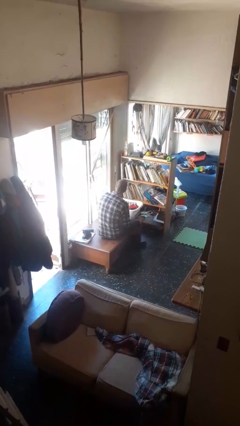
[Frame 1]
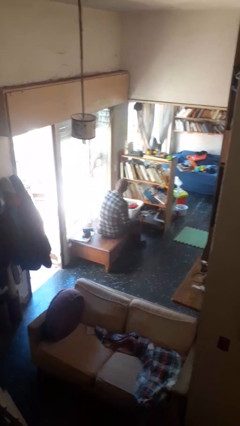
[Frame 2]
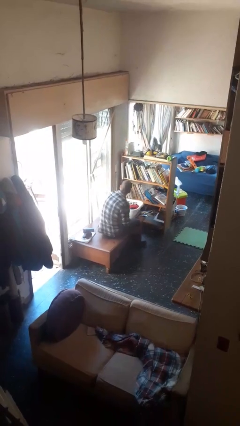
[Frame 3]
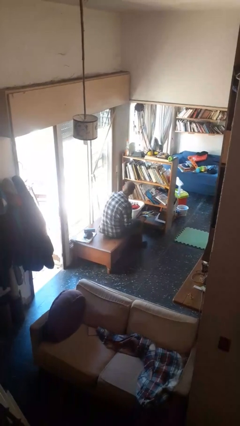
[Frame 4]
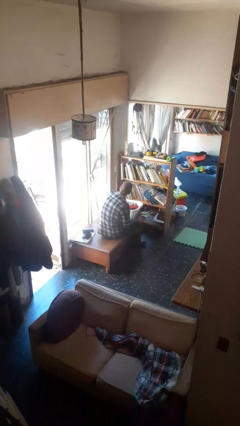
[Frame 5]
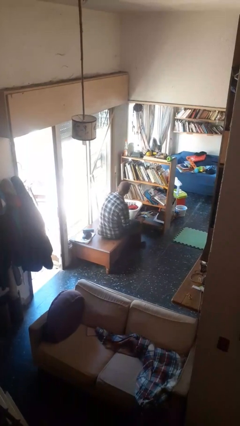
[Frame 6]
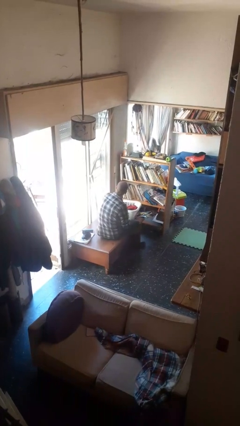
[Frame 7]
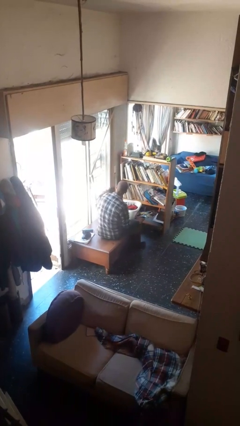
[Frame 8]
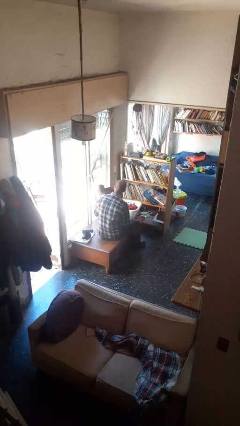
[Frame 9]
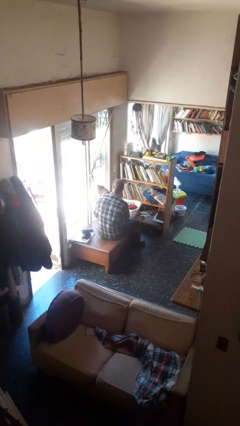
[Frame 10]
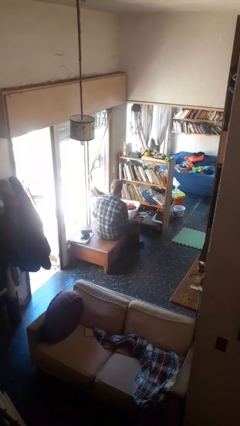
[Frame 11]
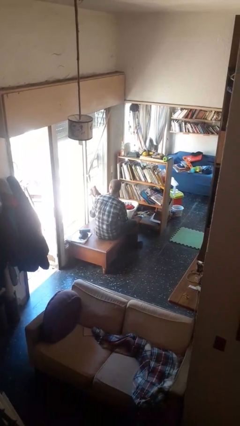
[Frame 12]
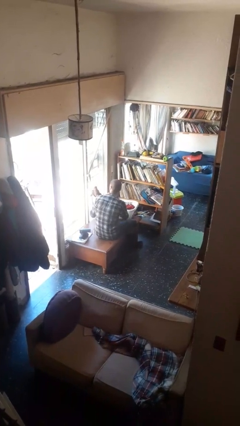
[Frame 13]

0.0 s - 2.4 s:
person takes object from basket

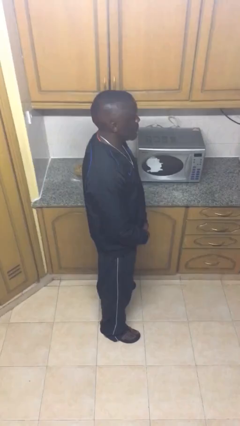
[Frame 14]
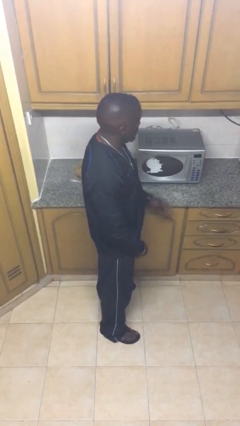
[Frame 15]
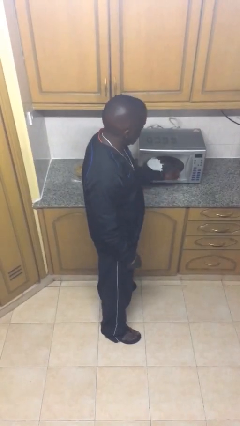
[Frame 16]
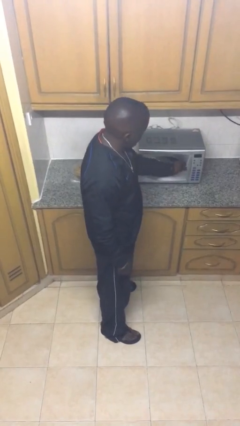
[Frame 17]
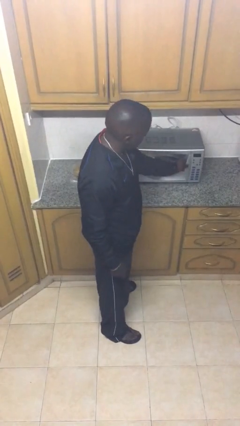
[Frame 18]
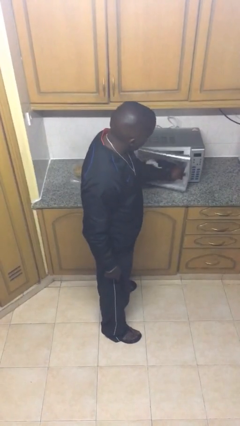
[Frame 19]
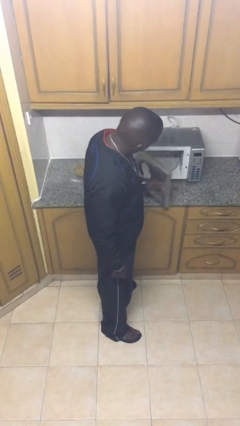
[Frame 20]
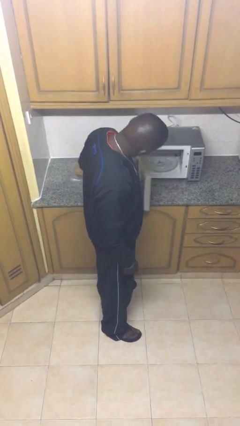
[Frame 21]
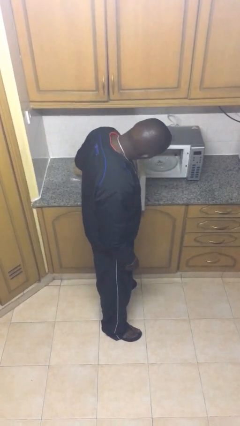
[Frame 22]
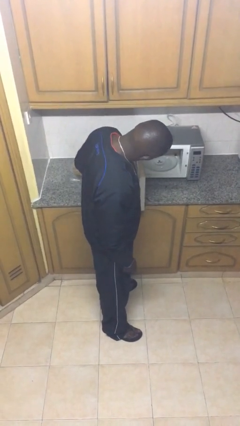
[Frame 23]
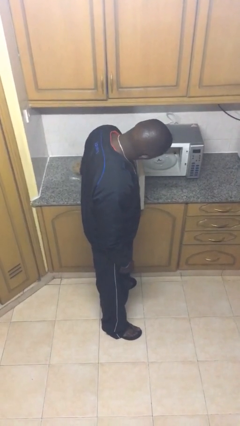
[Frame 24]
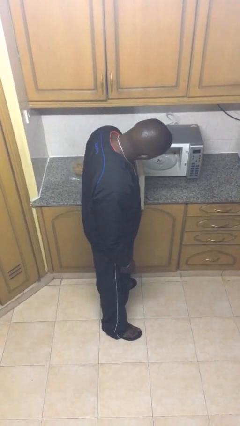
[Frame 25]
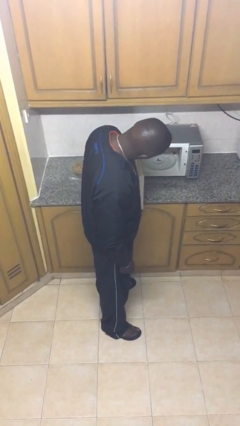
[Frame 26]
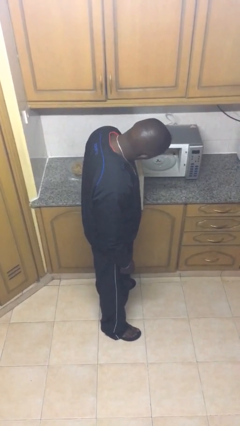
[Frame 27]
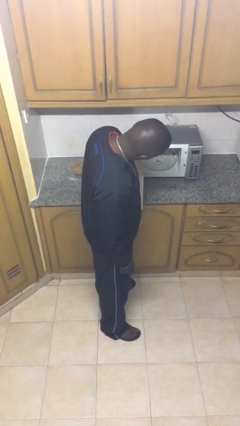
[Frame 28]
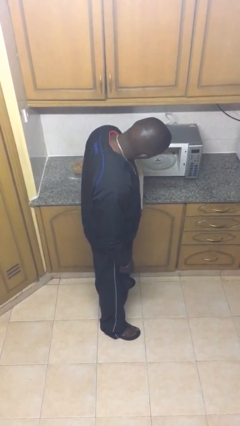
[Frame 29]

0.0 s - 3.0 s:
person opens microwave

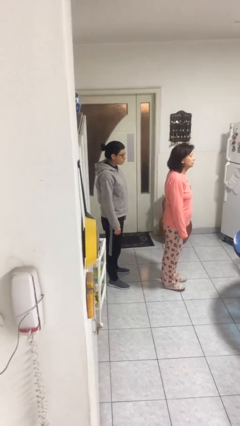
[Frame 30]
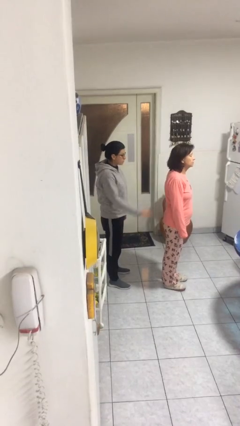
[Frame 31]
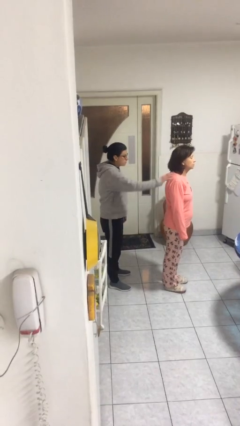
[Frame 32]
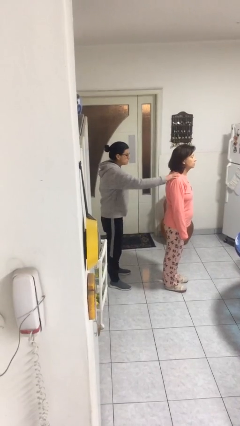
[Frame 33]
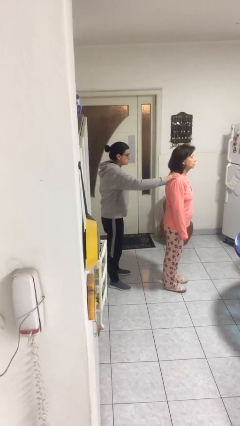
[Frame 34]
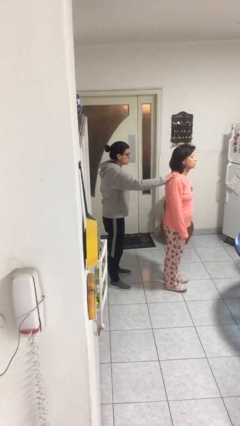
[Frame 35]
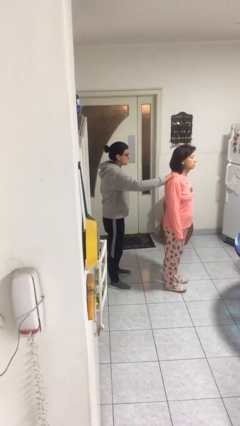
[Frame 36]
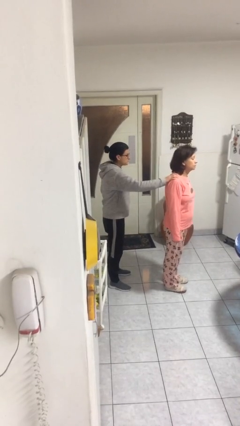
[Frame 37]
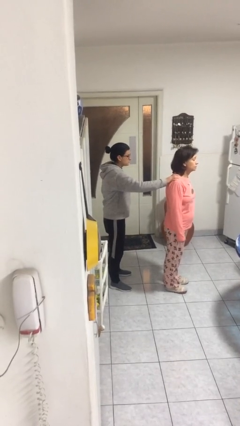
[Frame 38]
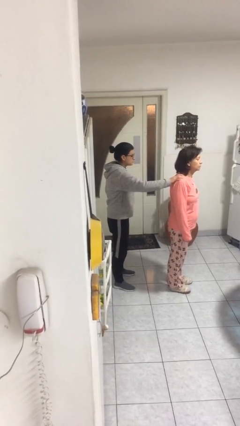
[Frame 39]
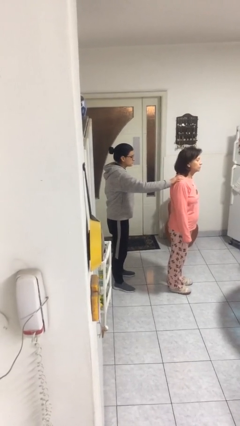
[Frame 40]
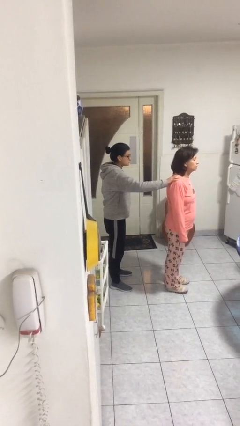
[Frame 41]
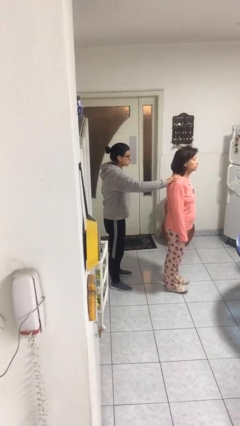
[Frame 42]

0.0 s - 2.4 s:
person grabs person by shoulder

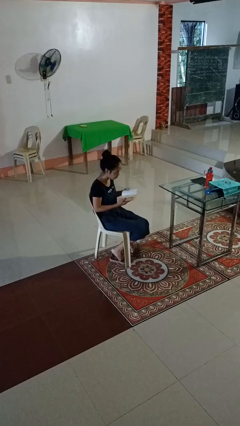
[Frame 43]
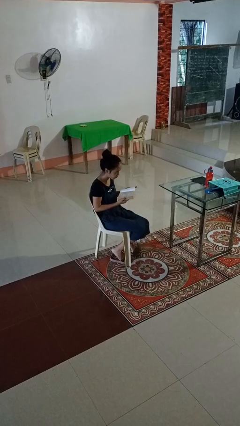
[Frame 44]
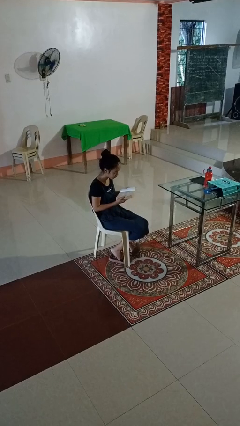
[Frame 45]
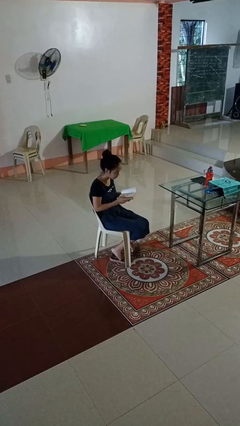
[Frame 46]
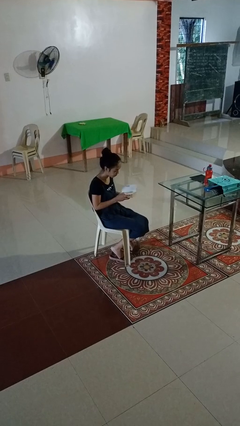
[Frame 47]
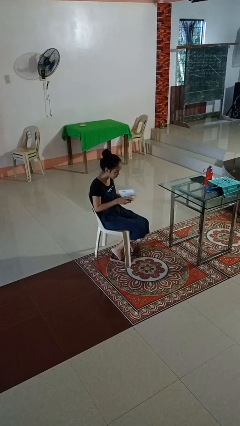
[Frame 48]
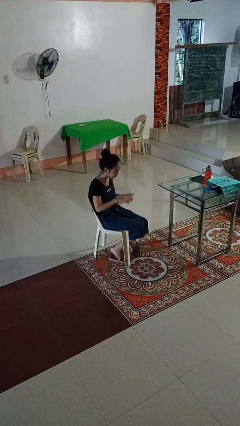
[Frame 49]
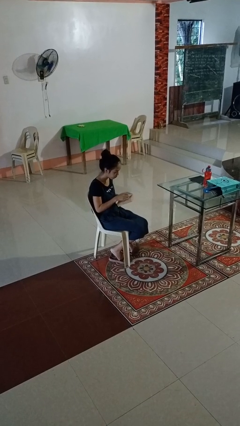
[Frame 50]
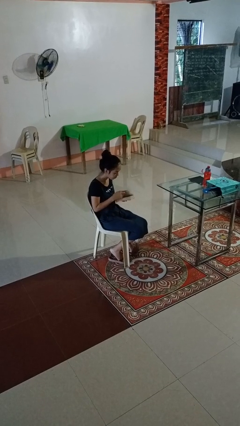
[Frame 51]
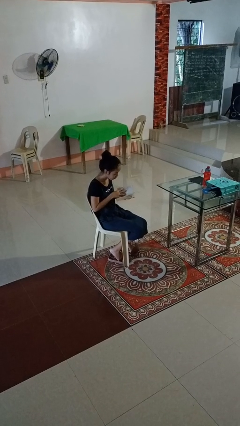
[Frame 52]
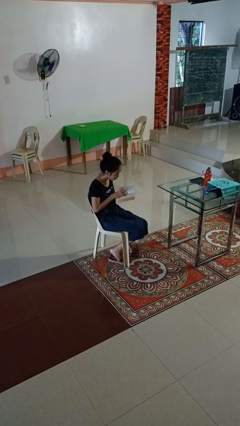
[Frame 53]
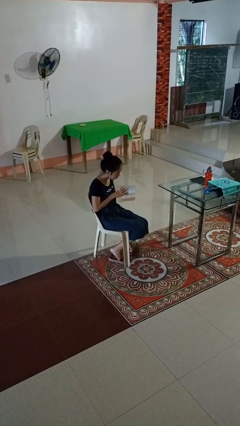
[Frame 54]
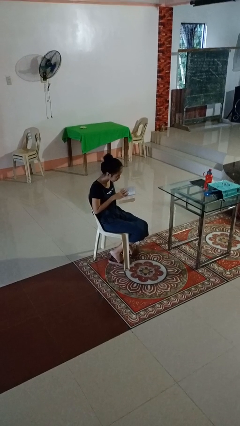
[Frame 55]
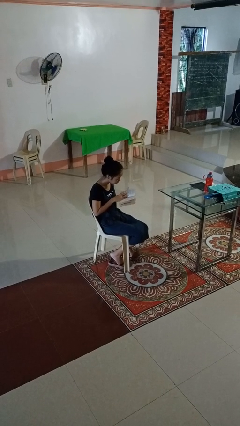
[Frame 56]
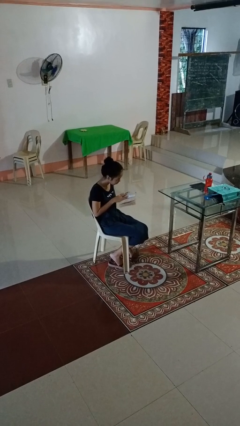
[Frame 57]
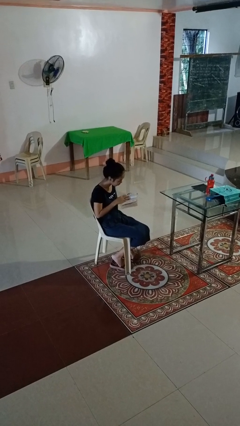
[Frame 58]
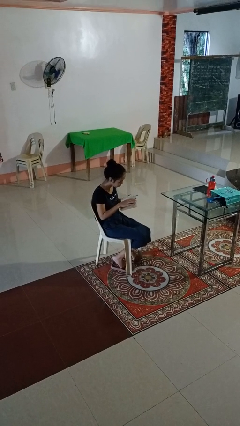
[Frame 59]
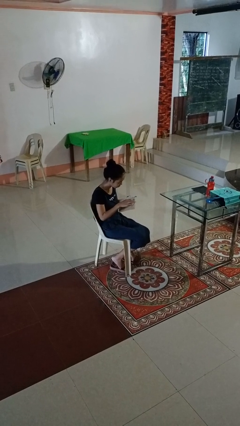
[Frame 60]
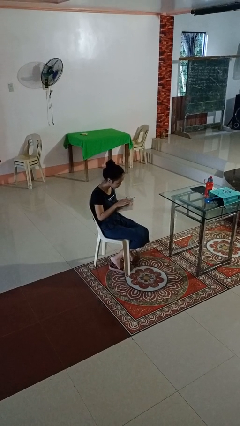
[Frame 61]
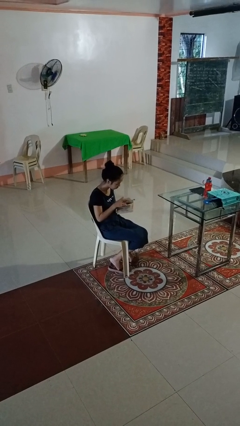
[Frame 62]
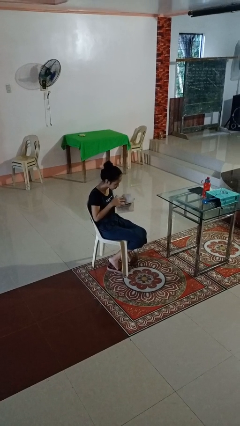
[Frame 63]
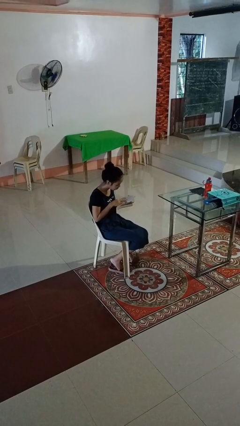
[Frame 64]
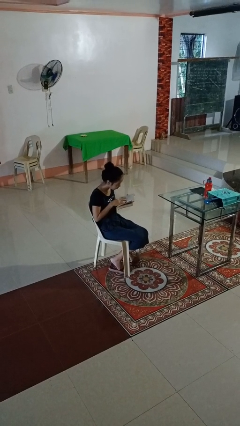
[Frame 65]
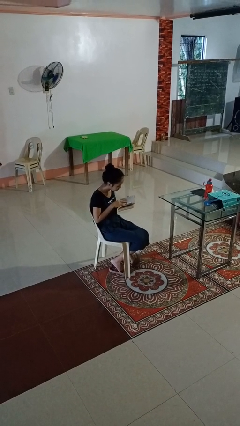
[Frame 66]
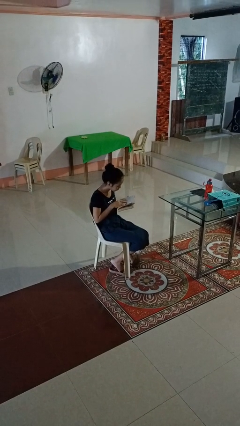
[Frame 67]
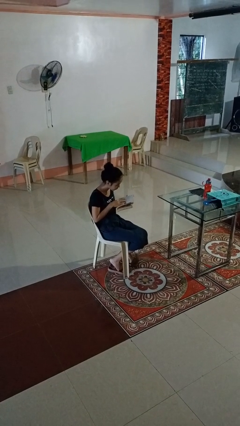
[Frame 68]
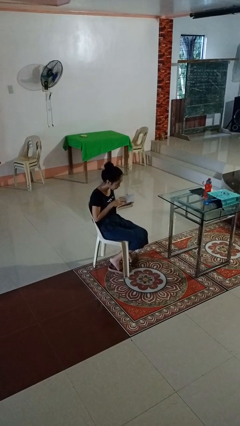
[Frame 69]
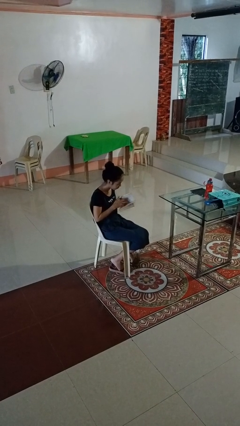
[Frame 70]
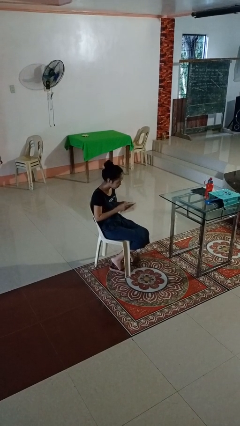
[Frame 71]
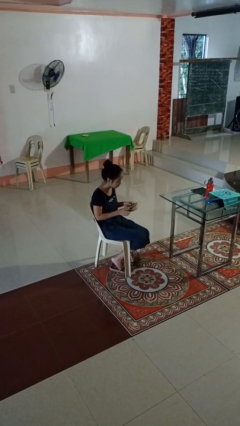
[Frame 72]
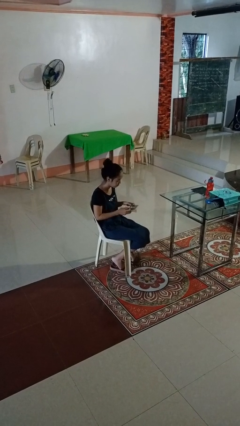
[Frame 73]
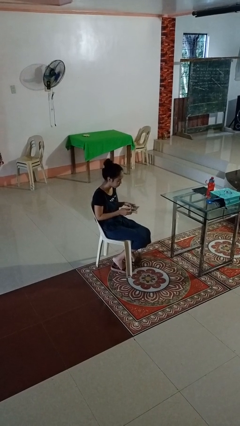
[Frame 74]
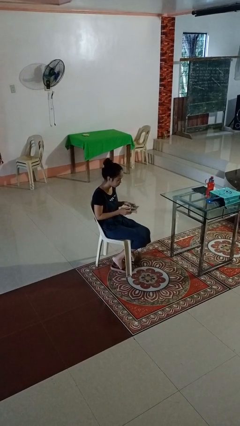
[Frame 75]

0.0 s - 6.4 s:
person reads book

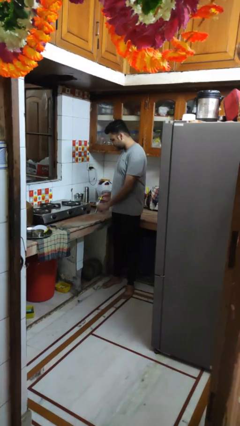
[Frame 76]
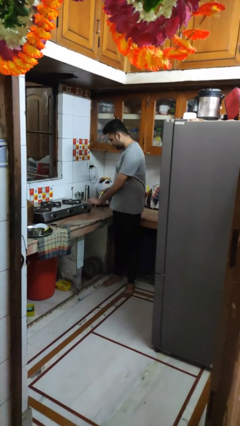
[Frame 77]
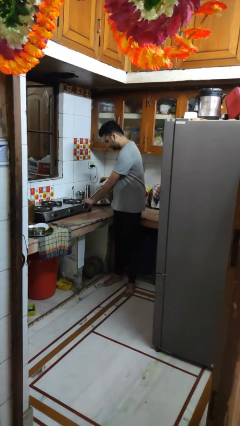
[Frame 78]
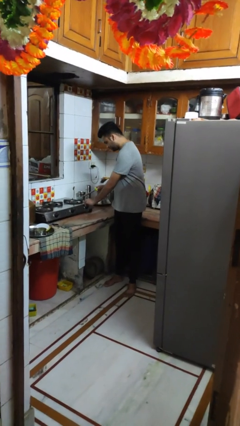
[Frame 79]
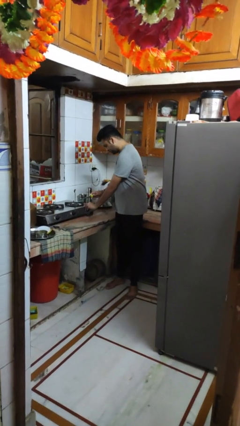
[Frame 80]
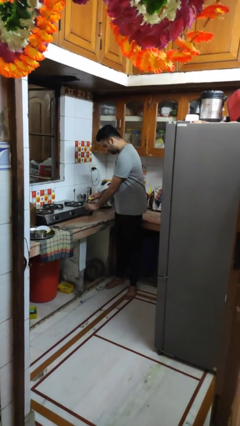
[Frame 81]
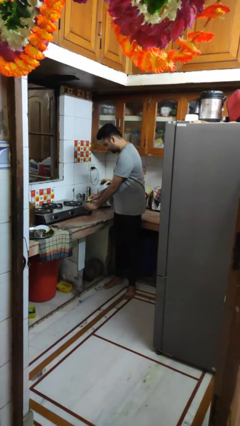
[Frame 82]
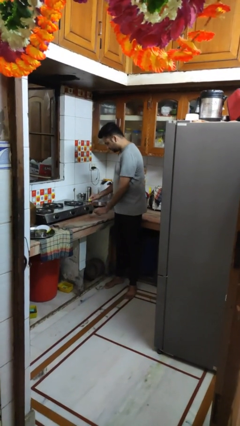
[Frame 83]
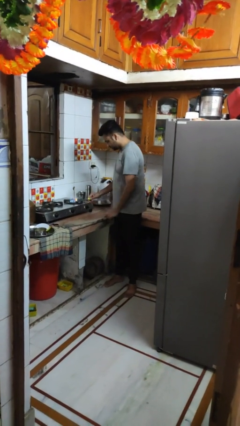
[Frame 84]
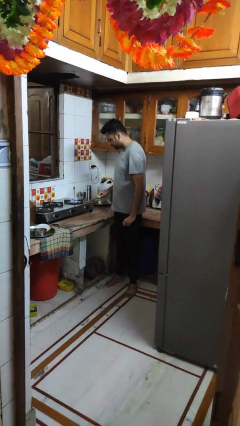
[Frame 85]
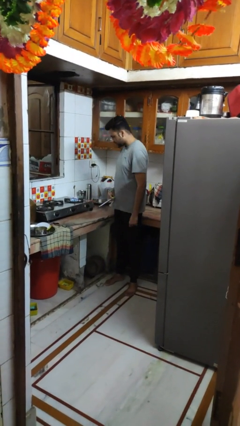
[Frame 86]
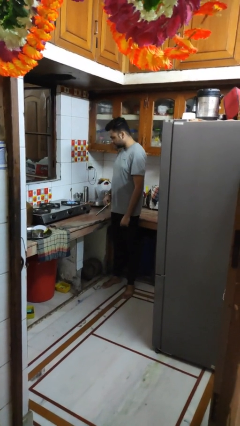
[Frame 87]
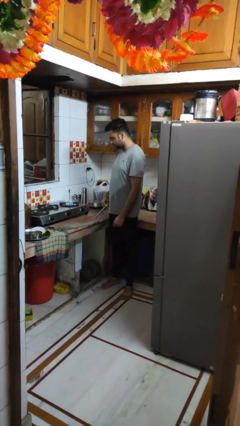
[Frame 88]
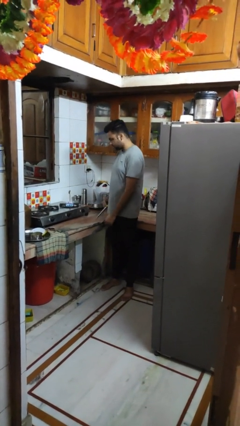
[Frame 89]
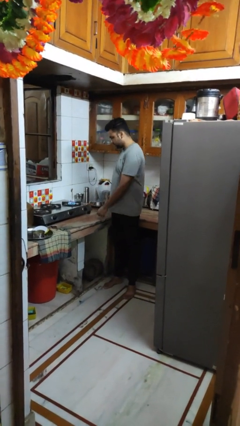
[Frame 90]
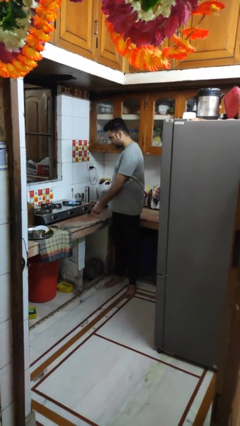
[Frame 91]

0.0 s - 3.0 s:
person turns on stovetop
